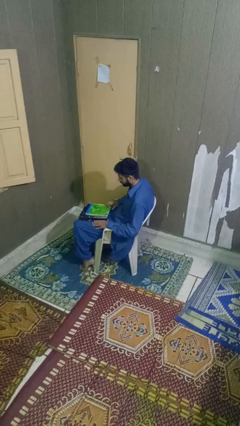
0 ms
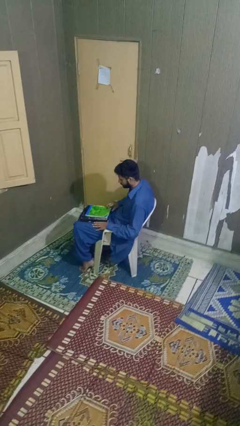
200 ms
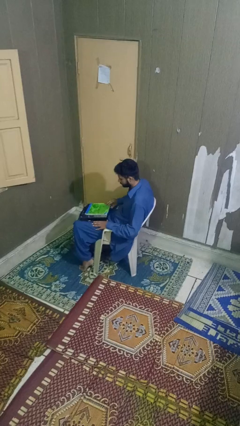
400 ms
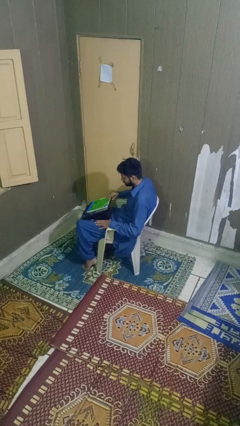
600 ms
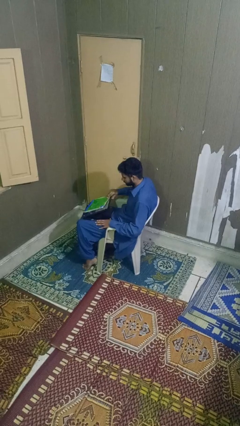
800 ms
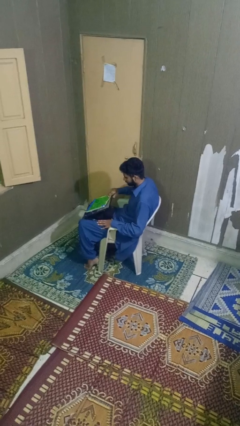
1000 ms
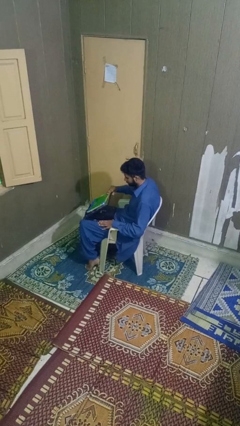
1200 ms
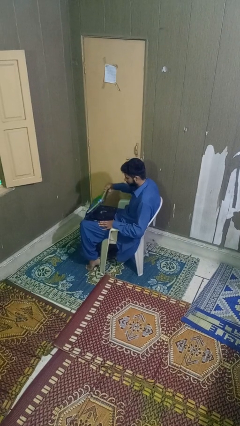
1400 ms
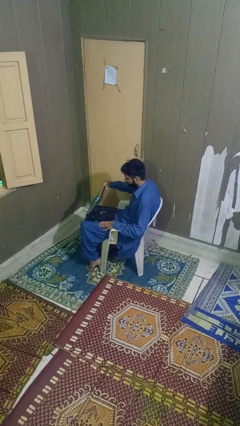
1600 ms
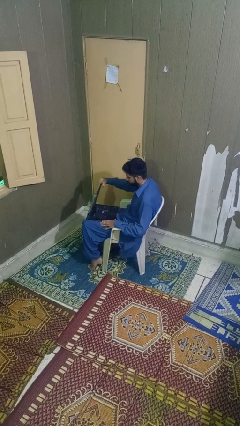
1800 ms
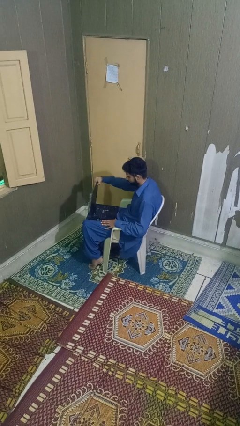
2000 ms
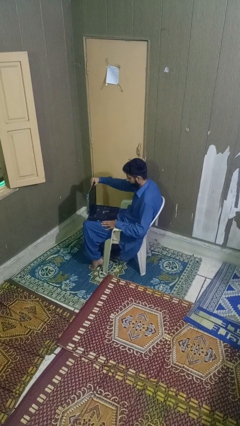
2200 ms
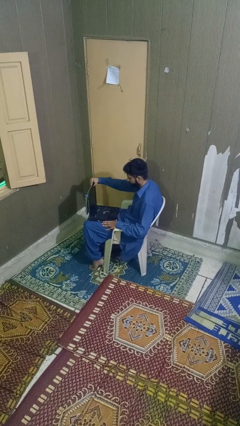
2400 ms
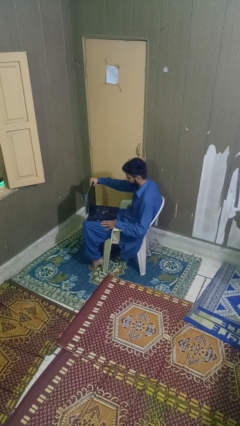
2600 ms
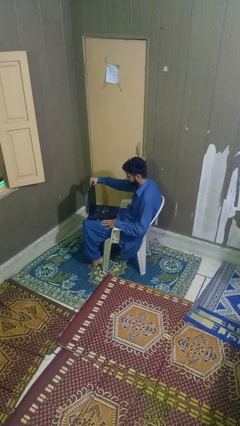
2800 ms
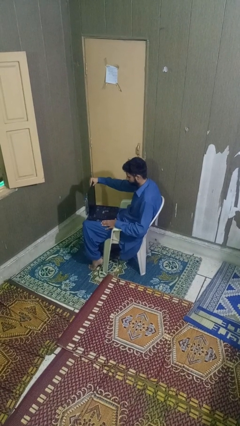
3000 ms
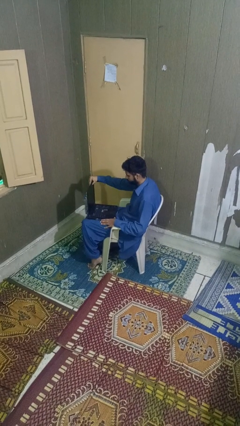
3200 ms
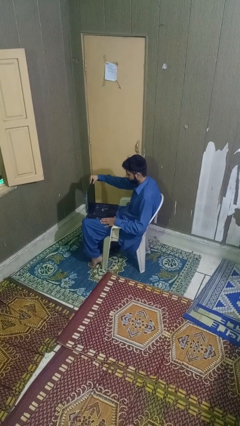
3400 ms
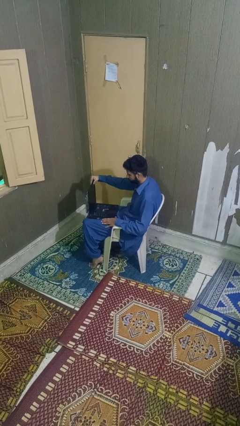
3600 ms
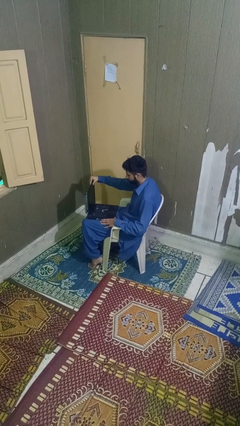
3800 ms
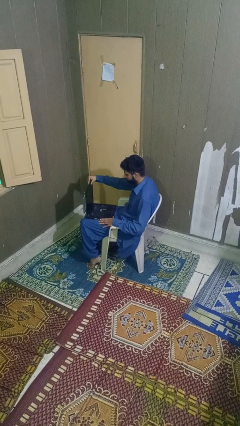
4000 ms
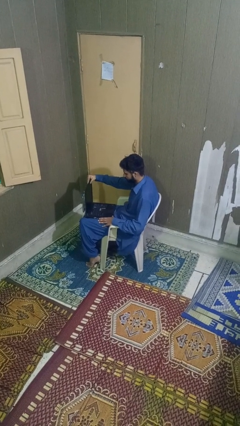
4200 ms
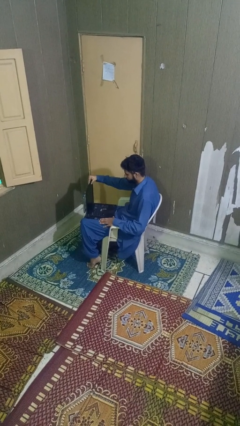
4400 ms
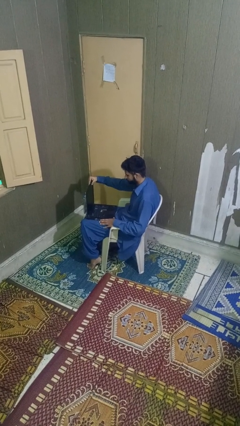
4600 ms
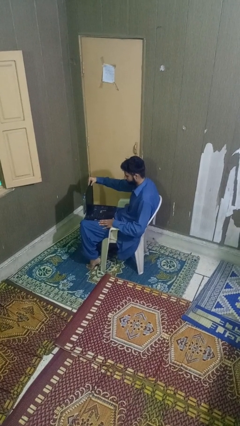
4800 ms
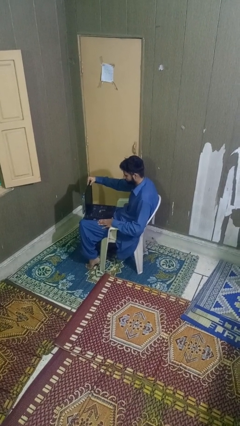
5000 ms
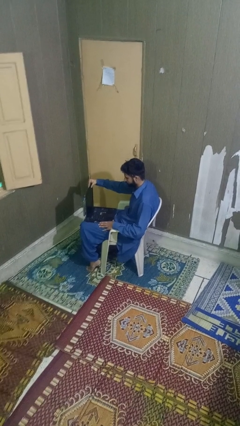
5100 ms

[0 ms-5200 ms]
person opens laptop

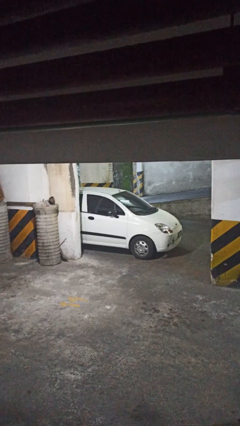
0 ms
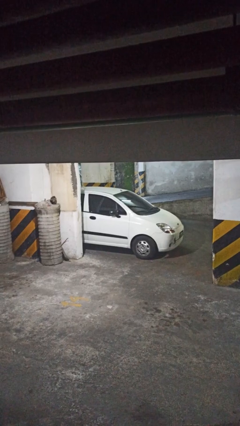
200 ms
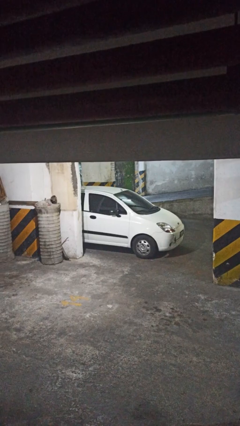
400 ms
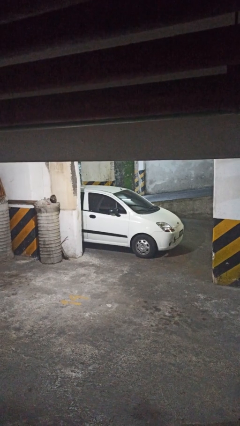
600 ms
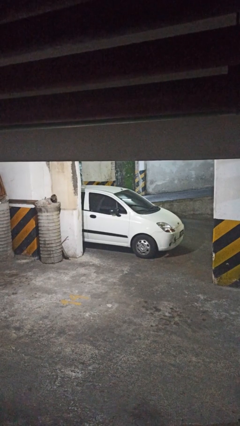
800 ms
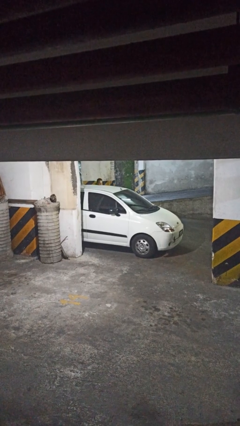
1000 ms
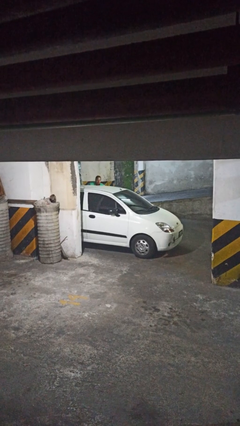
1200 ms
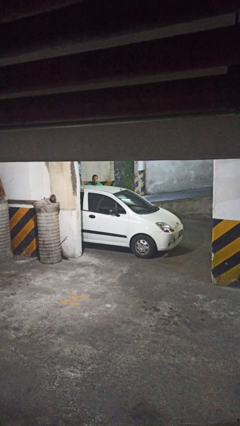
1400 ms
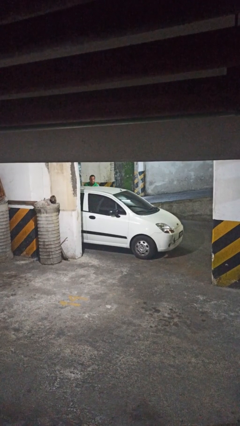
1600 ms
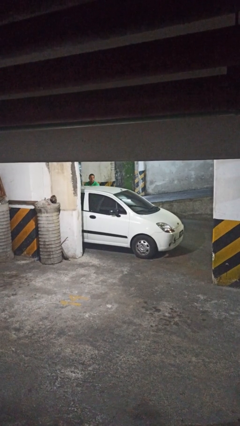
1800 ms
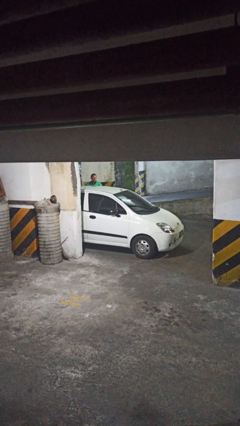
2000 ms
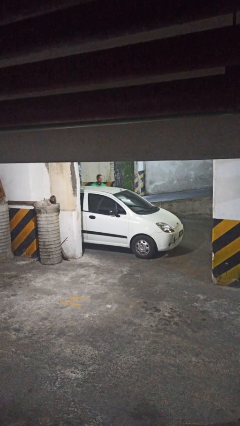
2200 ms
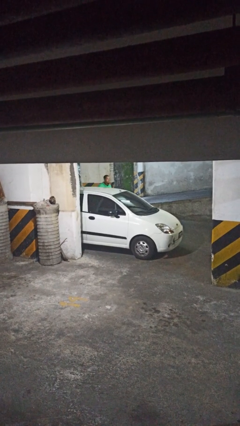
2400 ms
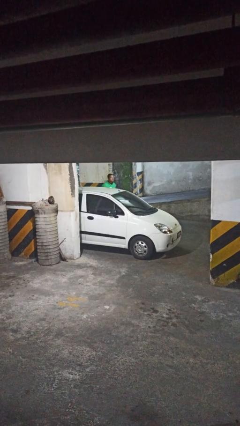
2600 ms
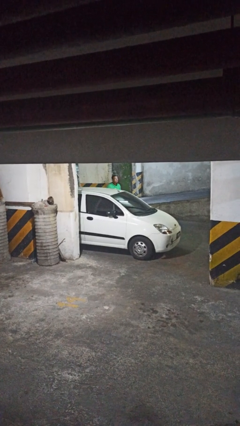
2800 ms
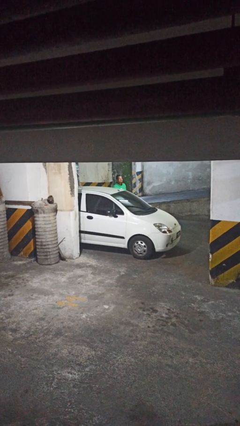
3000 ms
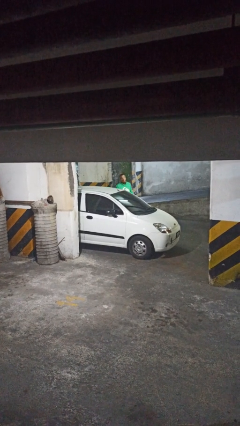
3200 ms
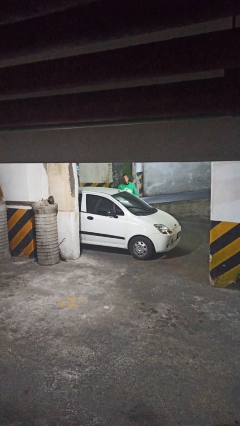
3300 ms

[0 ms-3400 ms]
car drops off person

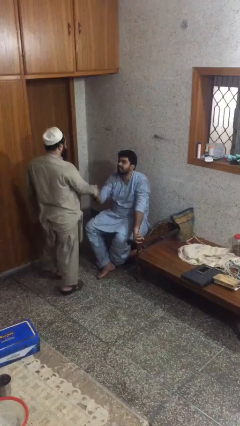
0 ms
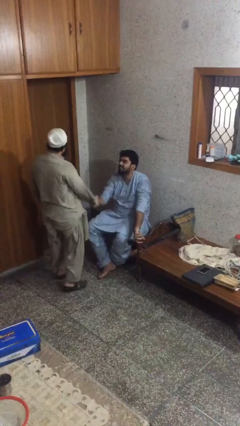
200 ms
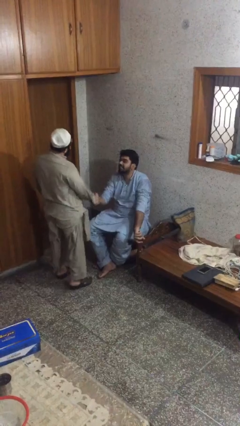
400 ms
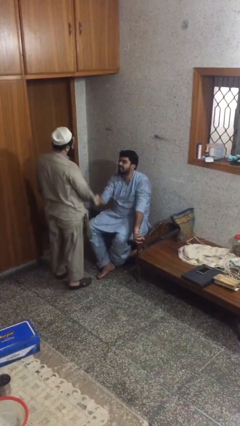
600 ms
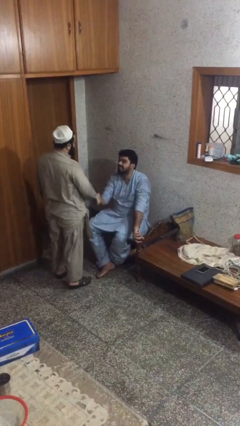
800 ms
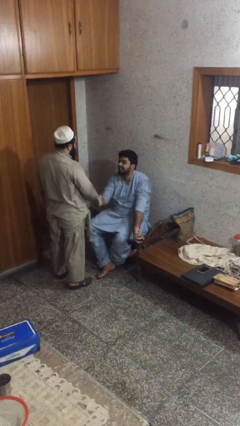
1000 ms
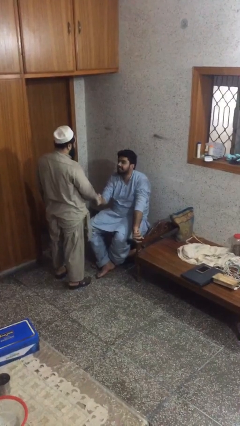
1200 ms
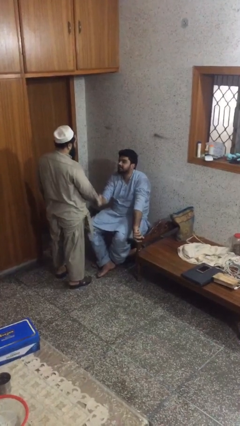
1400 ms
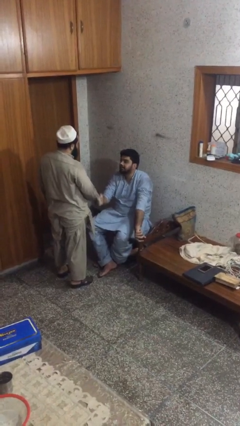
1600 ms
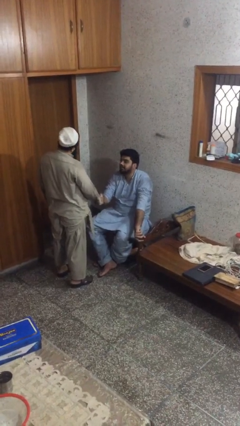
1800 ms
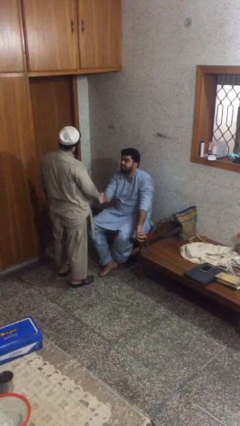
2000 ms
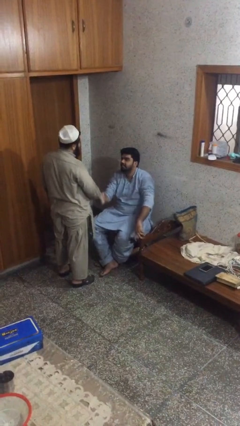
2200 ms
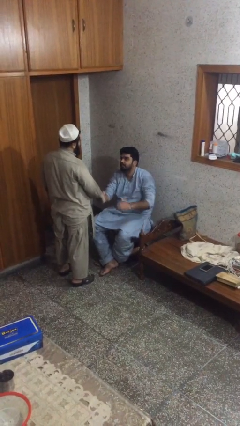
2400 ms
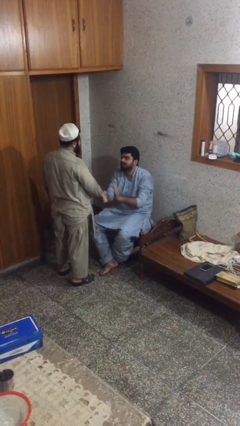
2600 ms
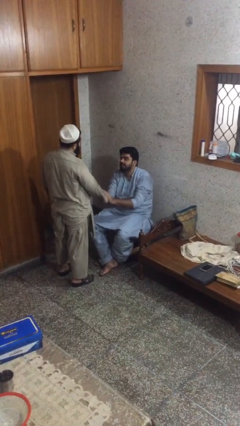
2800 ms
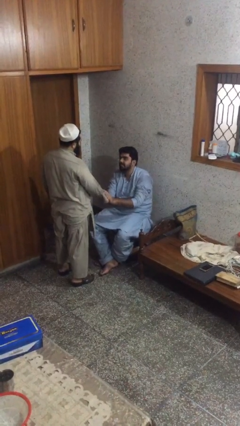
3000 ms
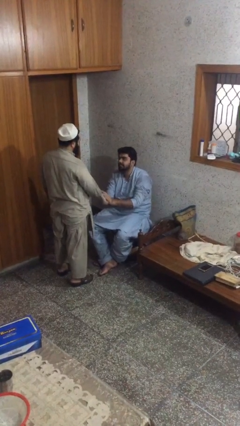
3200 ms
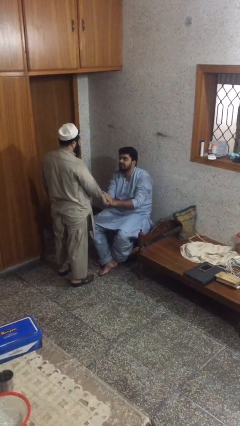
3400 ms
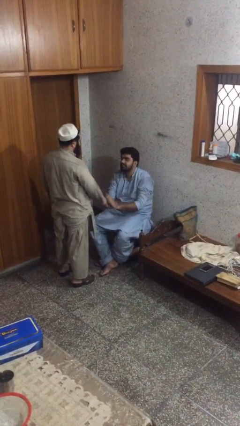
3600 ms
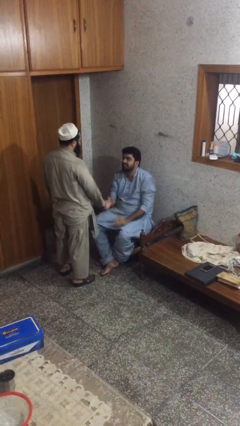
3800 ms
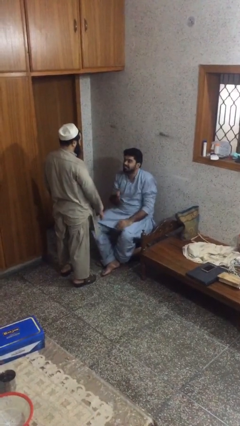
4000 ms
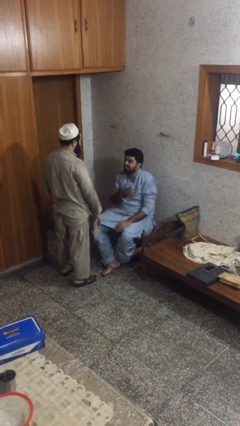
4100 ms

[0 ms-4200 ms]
person shakes hand

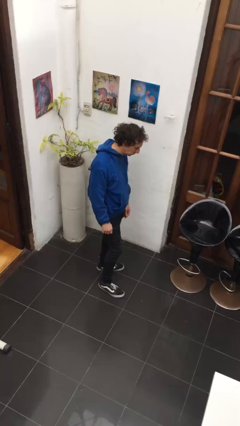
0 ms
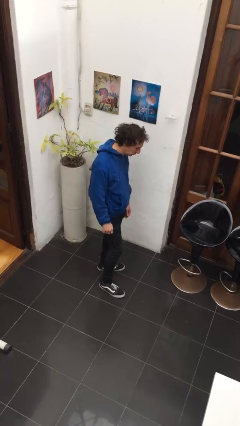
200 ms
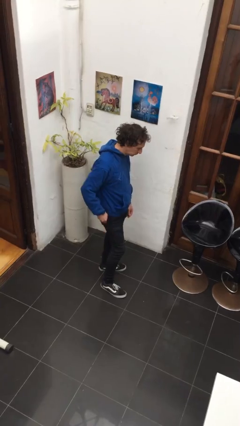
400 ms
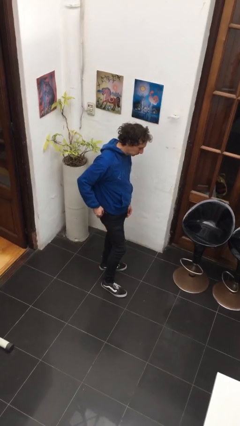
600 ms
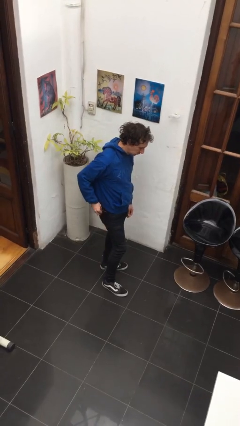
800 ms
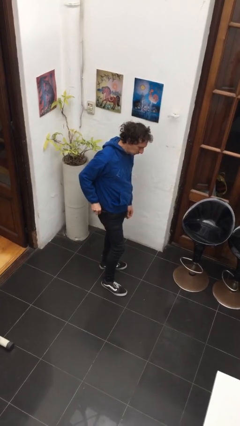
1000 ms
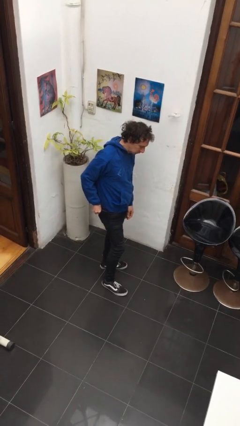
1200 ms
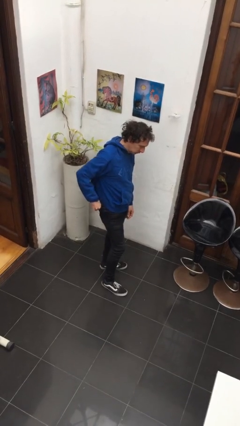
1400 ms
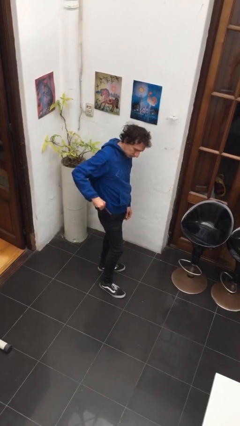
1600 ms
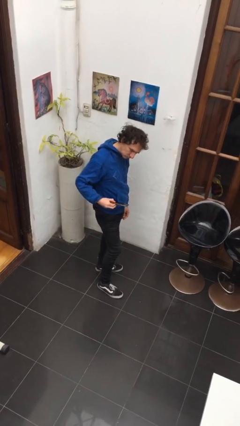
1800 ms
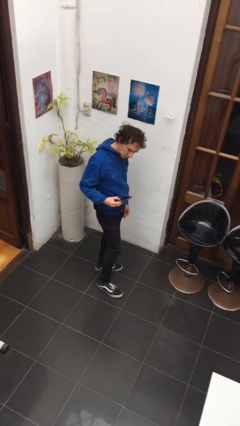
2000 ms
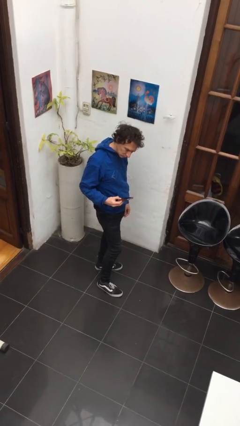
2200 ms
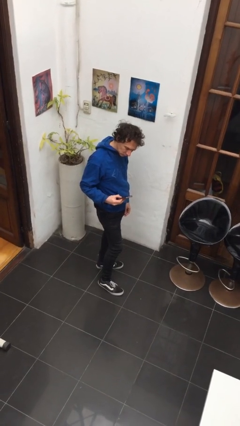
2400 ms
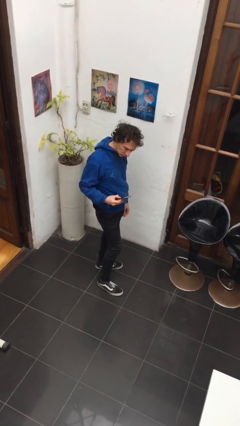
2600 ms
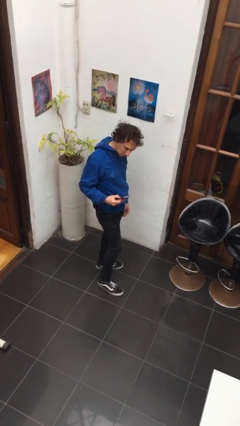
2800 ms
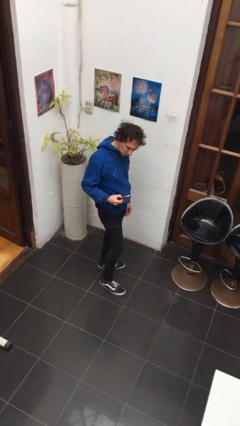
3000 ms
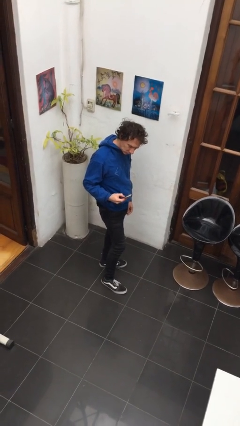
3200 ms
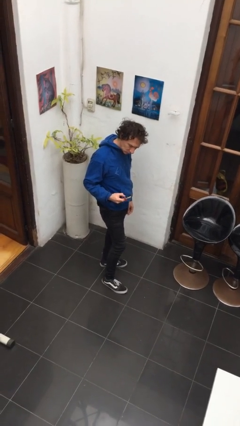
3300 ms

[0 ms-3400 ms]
person takes phone from pocket

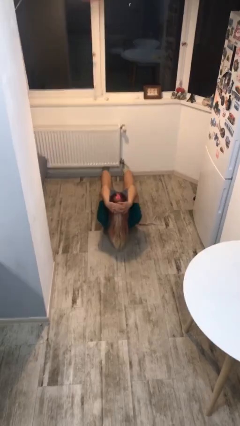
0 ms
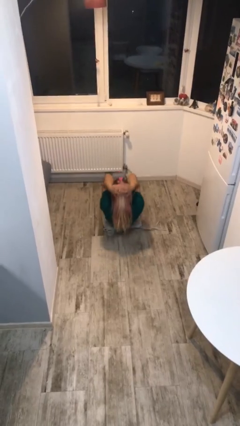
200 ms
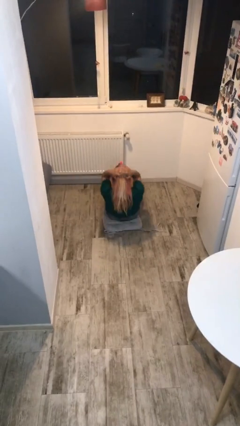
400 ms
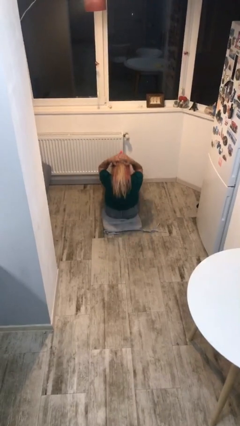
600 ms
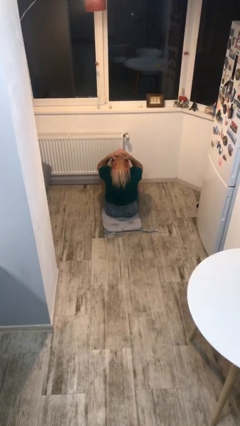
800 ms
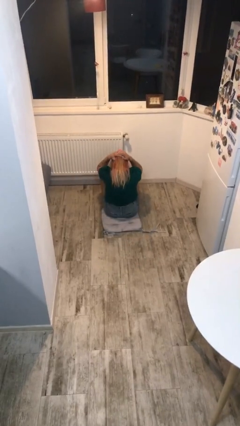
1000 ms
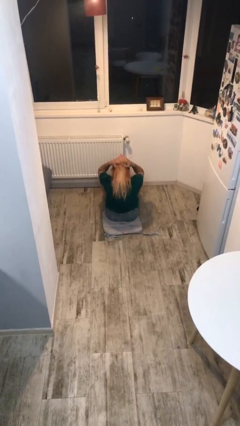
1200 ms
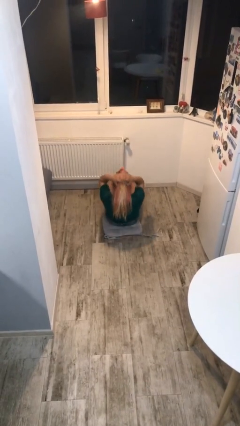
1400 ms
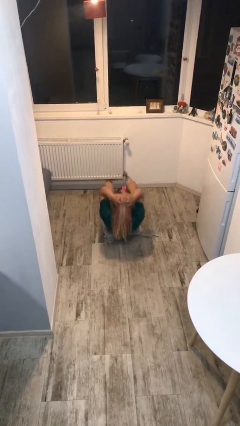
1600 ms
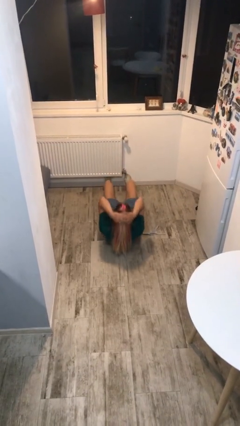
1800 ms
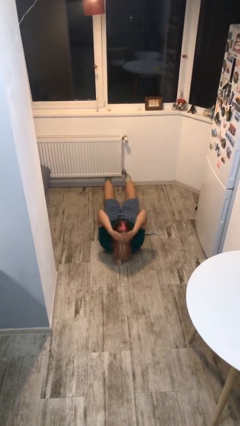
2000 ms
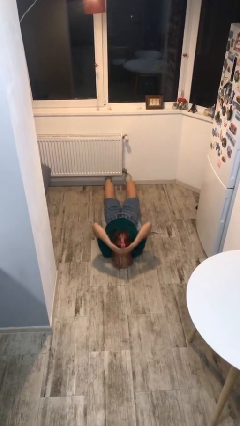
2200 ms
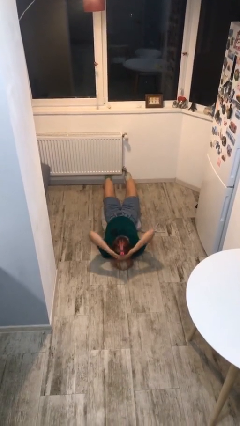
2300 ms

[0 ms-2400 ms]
person exercises with situp
